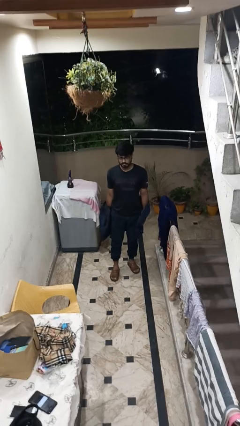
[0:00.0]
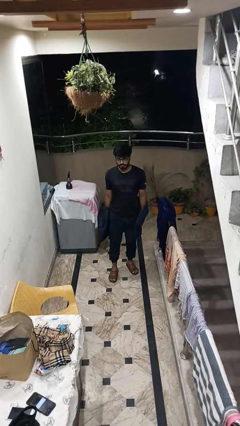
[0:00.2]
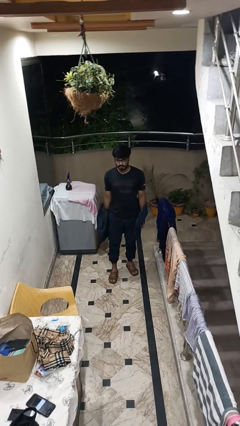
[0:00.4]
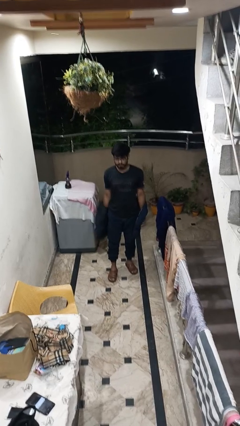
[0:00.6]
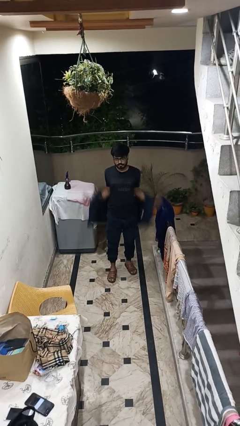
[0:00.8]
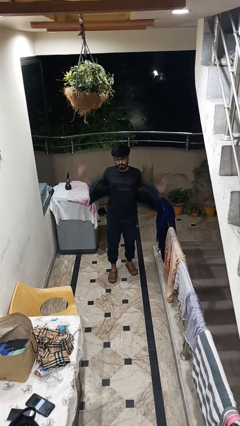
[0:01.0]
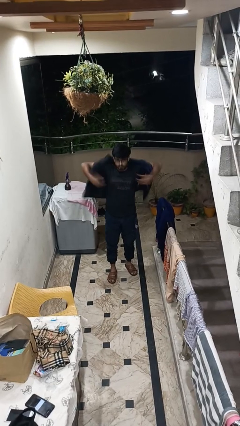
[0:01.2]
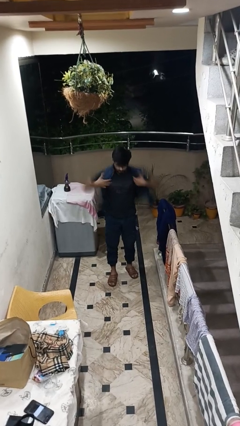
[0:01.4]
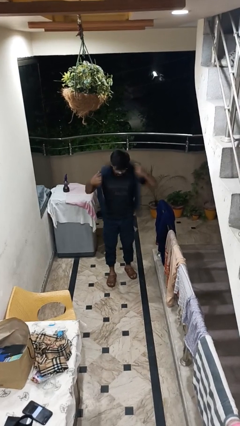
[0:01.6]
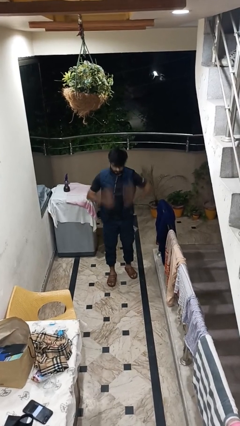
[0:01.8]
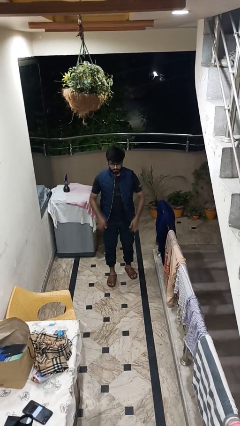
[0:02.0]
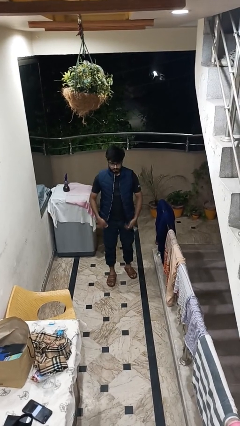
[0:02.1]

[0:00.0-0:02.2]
person puts on jacket

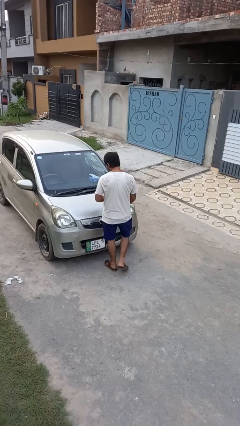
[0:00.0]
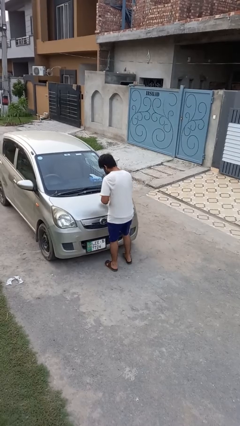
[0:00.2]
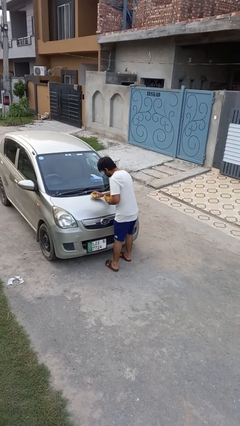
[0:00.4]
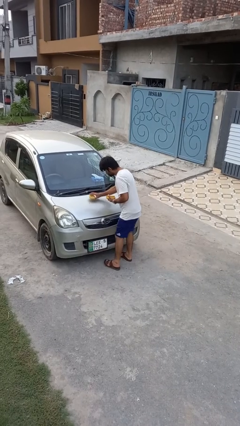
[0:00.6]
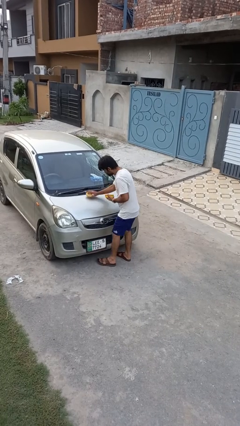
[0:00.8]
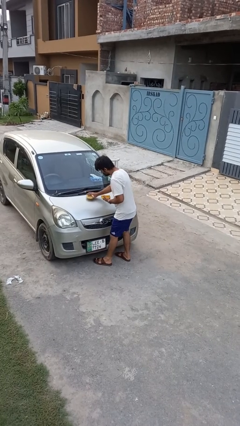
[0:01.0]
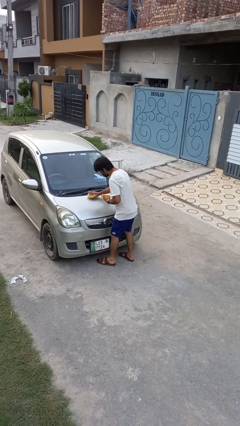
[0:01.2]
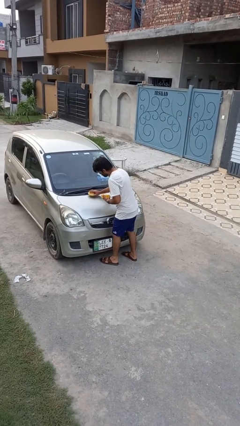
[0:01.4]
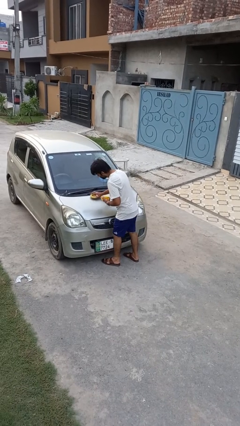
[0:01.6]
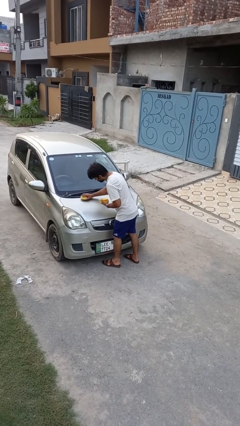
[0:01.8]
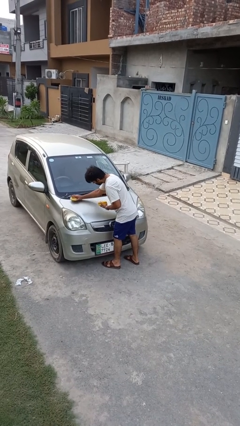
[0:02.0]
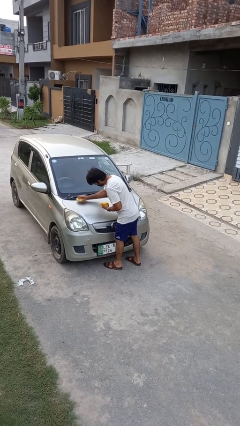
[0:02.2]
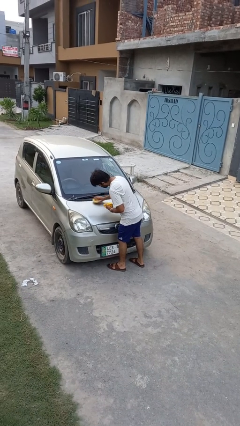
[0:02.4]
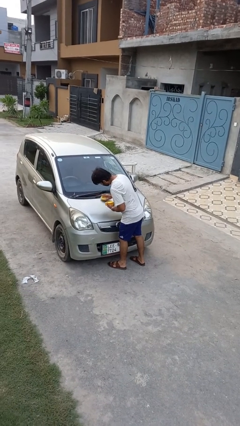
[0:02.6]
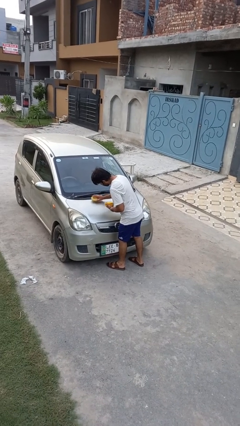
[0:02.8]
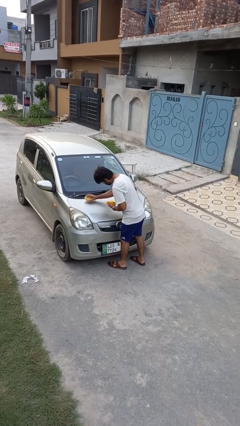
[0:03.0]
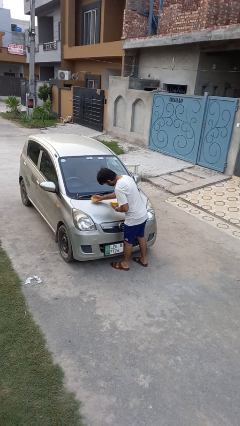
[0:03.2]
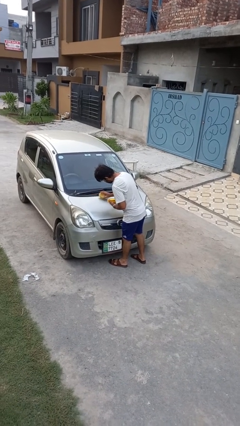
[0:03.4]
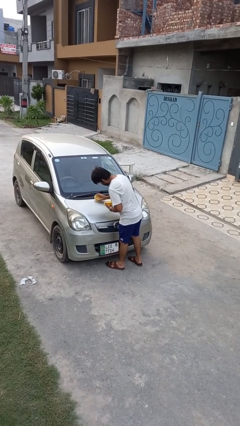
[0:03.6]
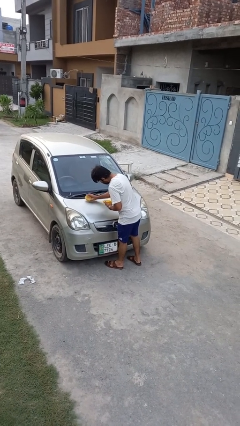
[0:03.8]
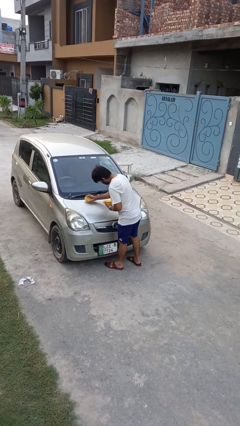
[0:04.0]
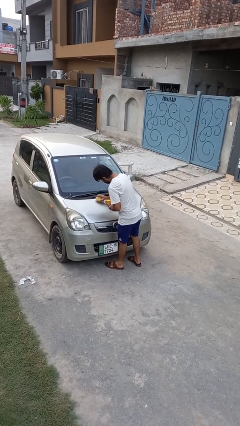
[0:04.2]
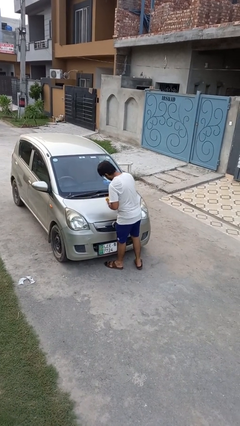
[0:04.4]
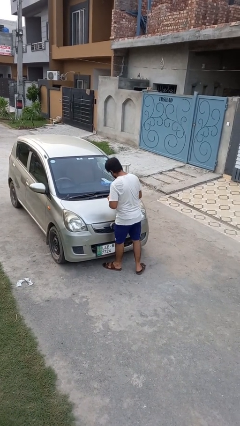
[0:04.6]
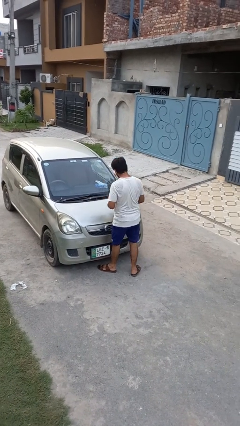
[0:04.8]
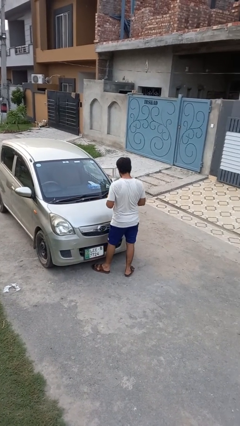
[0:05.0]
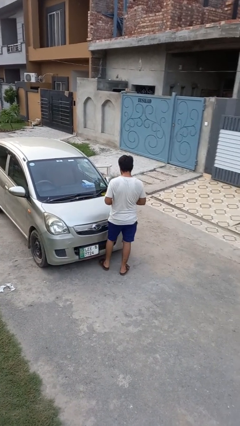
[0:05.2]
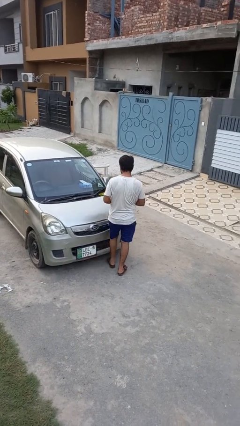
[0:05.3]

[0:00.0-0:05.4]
person polishes car with rag

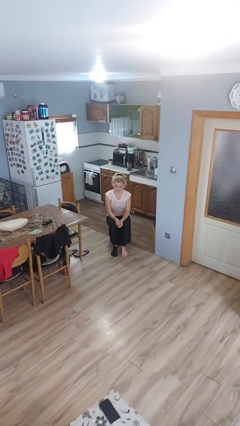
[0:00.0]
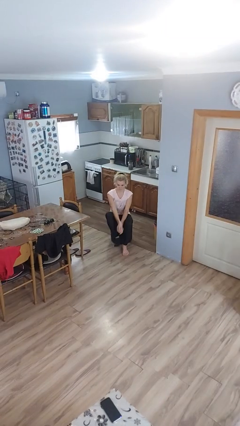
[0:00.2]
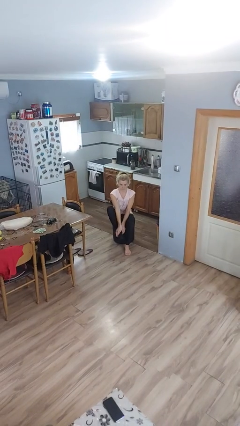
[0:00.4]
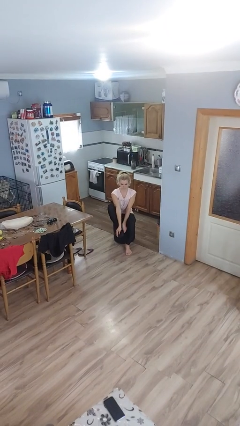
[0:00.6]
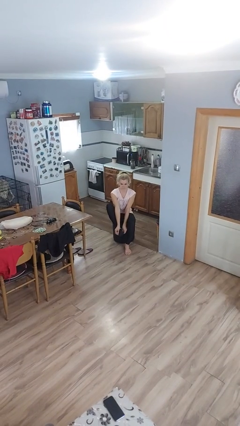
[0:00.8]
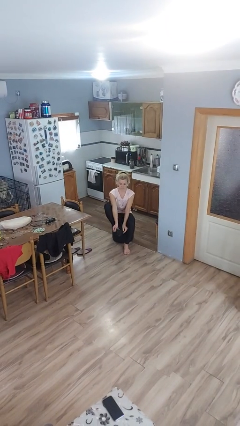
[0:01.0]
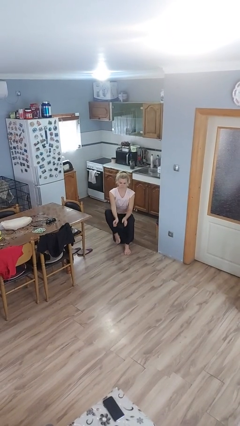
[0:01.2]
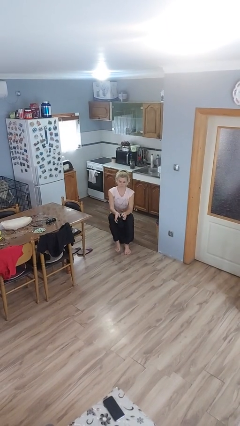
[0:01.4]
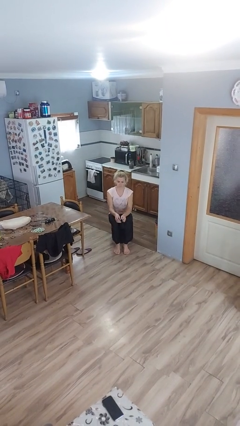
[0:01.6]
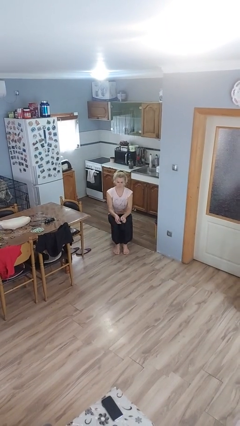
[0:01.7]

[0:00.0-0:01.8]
person takes off socks

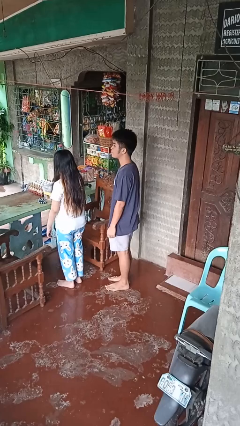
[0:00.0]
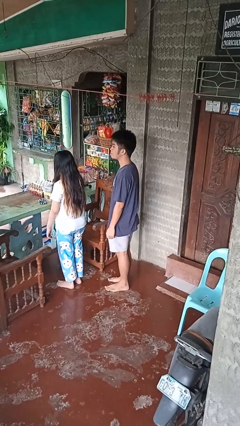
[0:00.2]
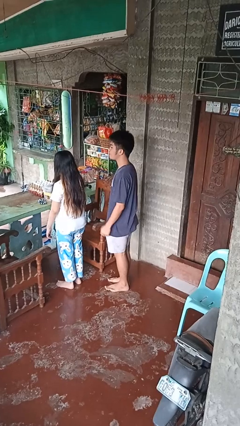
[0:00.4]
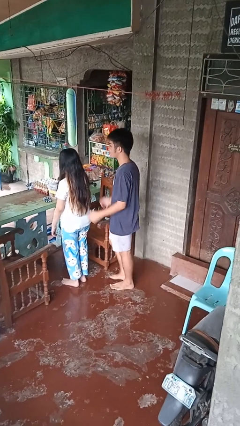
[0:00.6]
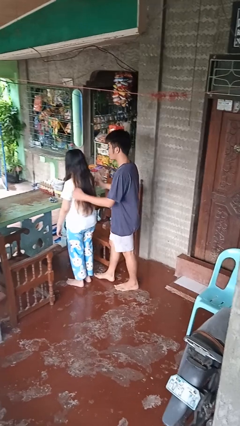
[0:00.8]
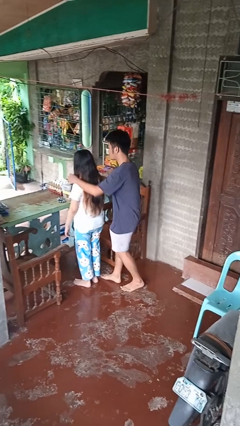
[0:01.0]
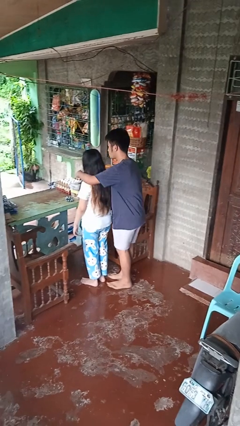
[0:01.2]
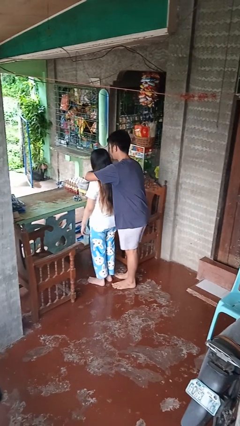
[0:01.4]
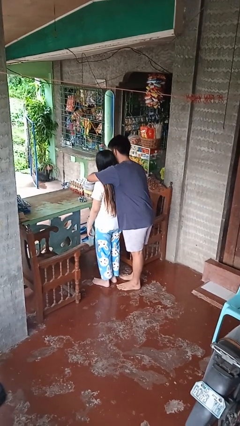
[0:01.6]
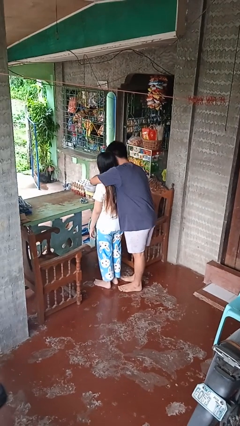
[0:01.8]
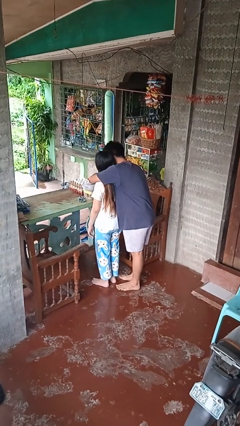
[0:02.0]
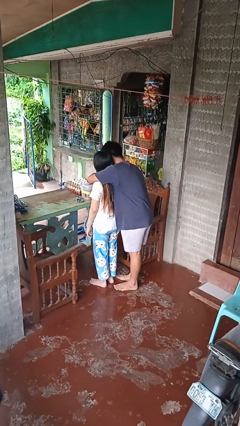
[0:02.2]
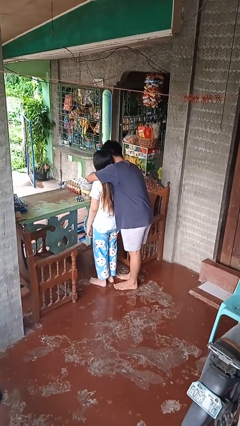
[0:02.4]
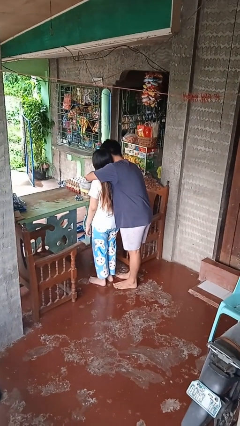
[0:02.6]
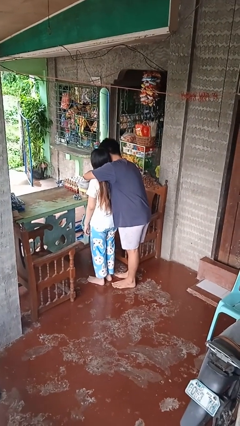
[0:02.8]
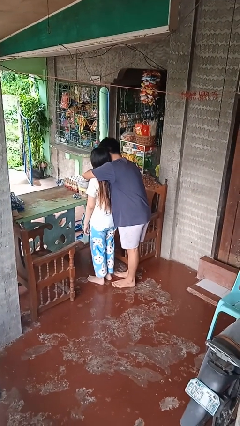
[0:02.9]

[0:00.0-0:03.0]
person hugs person from behind

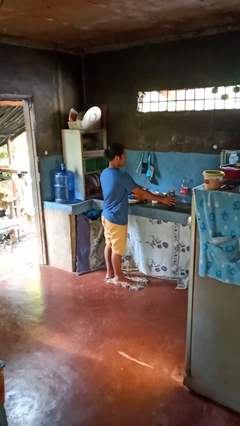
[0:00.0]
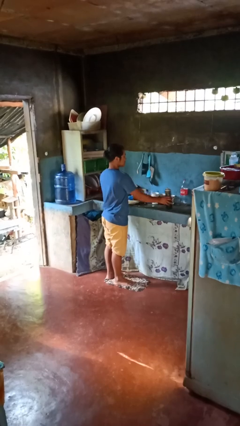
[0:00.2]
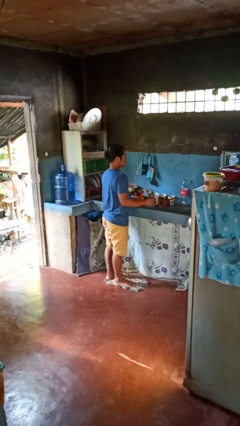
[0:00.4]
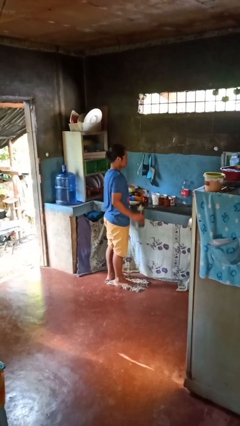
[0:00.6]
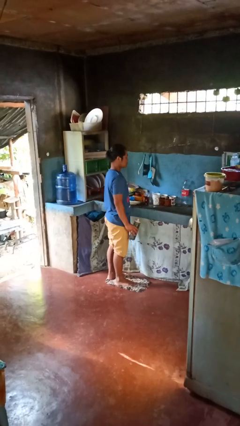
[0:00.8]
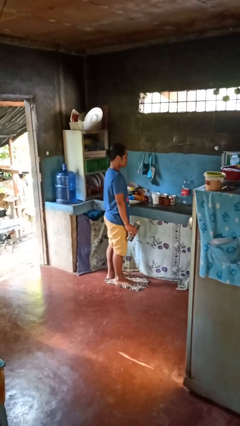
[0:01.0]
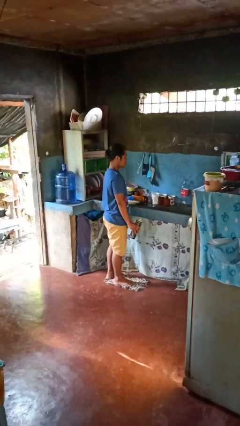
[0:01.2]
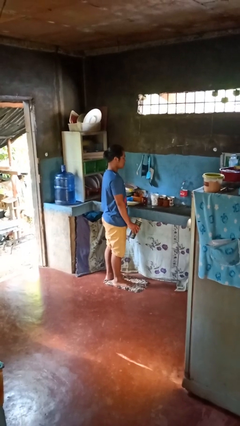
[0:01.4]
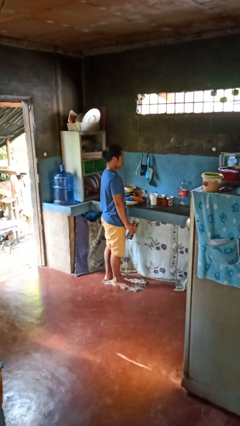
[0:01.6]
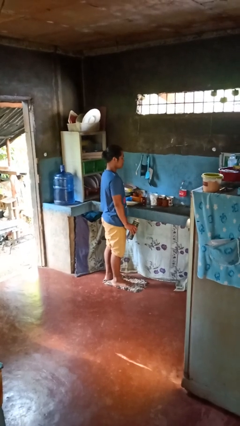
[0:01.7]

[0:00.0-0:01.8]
person picks up object from countertop

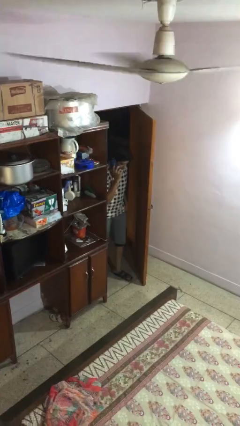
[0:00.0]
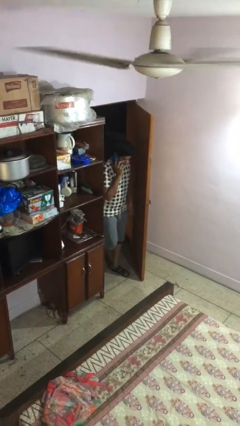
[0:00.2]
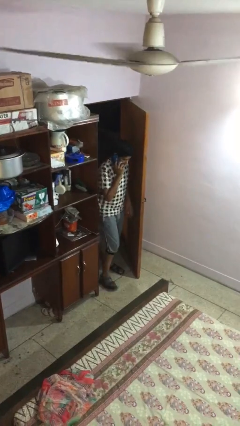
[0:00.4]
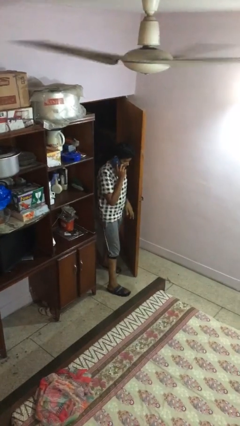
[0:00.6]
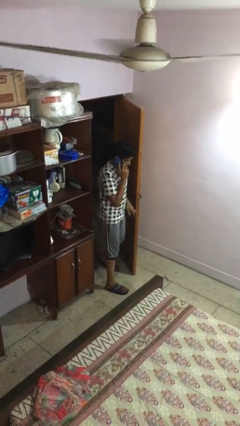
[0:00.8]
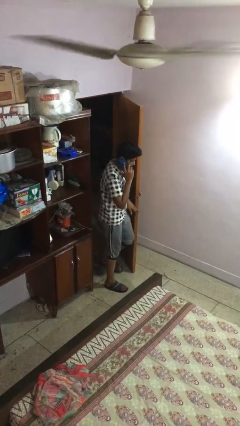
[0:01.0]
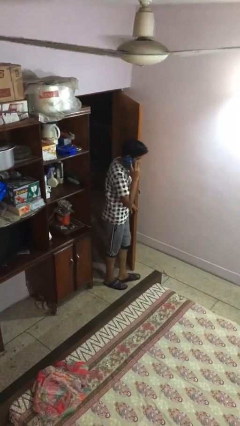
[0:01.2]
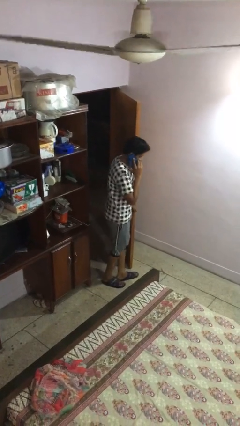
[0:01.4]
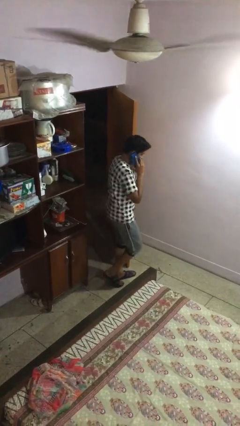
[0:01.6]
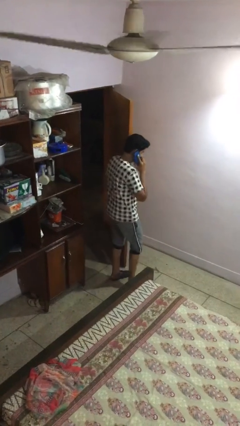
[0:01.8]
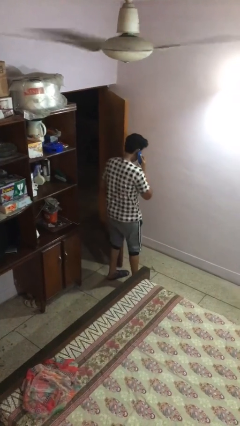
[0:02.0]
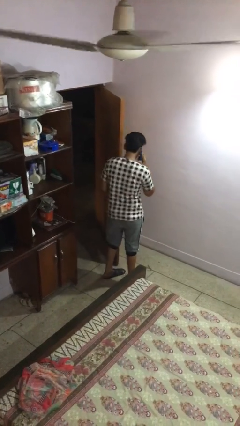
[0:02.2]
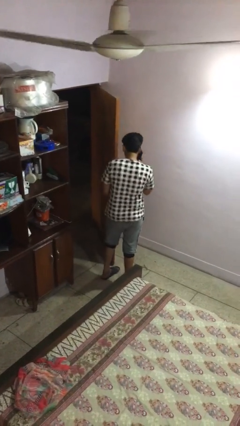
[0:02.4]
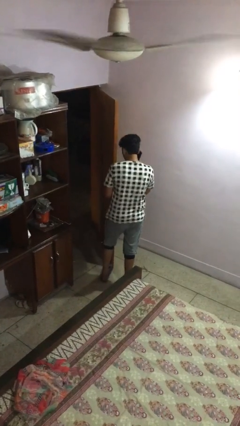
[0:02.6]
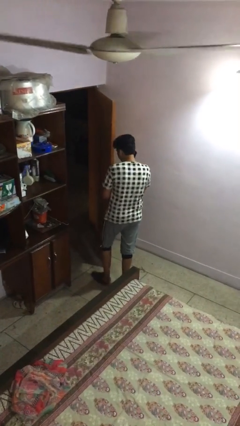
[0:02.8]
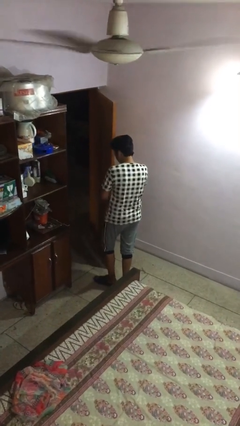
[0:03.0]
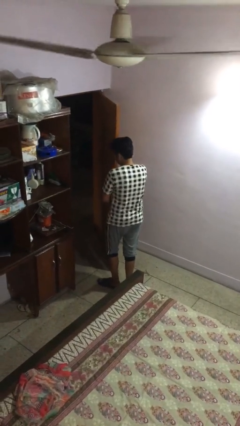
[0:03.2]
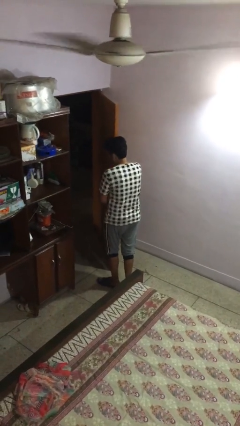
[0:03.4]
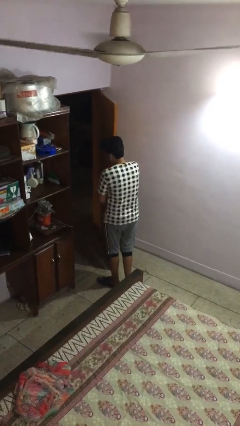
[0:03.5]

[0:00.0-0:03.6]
person enters scene through structure
